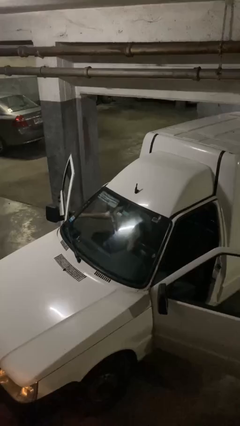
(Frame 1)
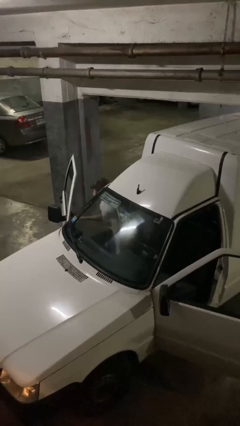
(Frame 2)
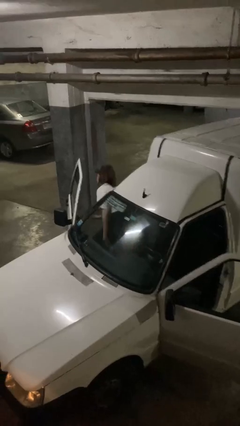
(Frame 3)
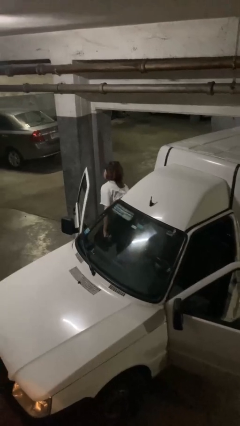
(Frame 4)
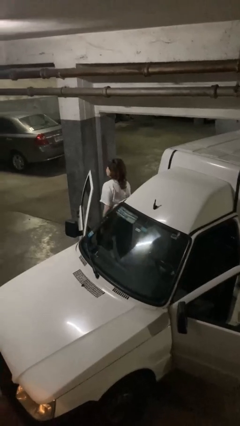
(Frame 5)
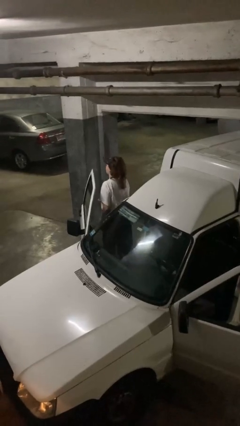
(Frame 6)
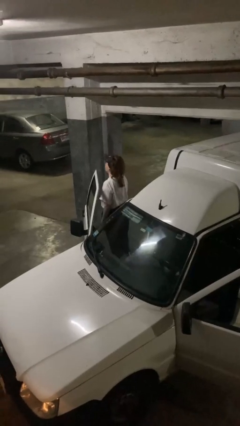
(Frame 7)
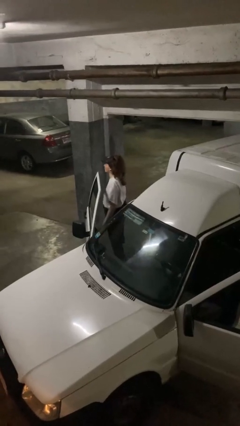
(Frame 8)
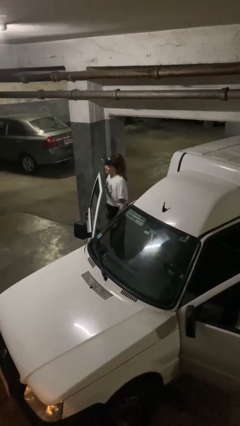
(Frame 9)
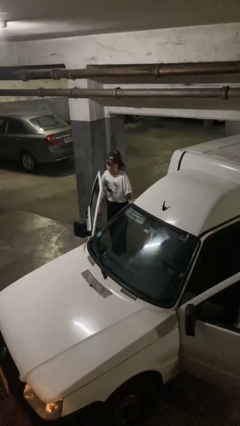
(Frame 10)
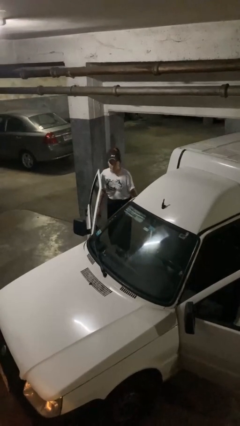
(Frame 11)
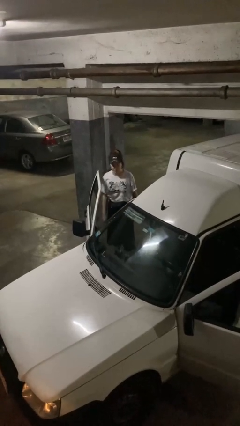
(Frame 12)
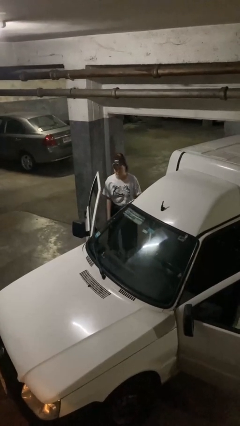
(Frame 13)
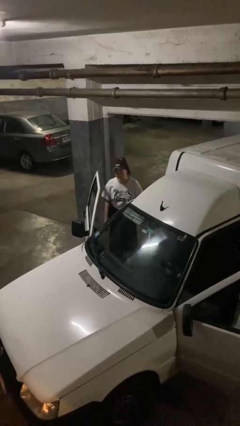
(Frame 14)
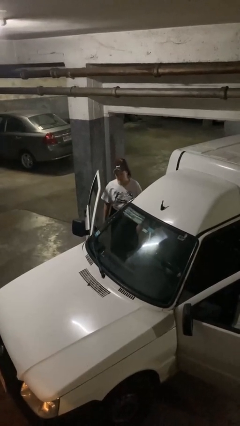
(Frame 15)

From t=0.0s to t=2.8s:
person exits car

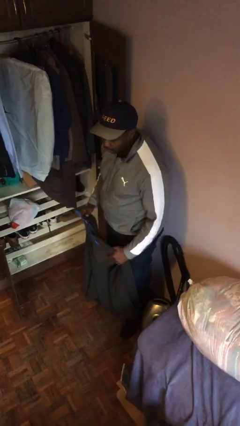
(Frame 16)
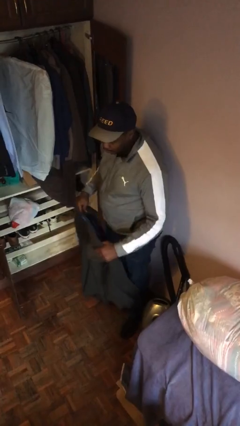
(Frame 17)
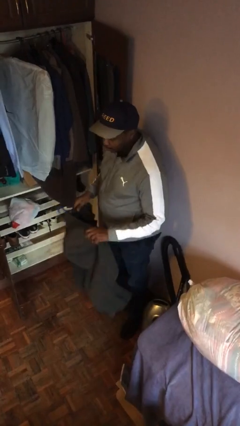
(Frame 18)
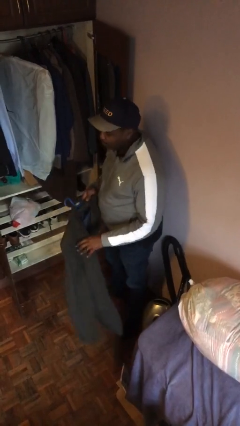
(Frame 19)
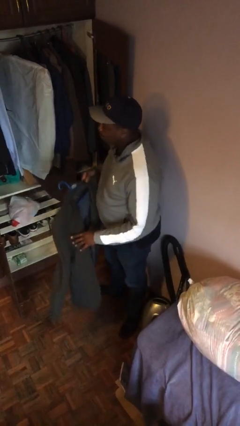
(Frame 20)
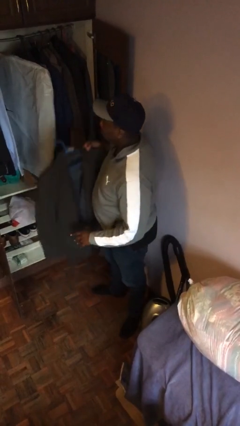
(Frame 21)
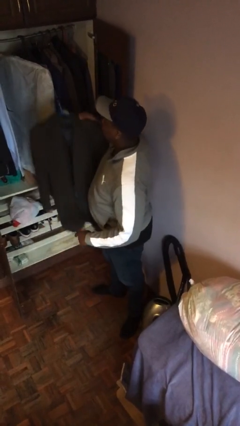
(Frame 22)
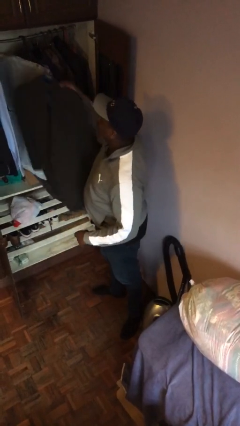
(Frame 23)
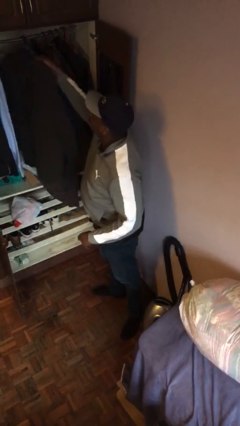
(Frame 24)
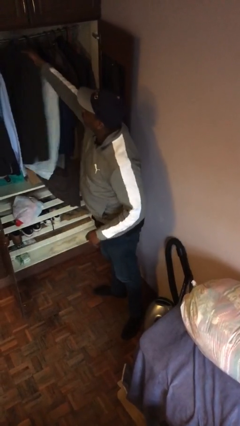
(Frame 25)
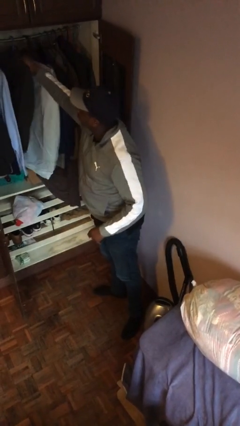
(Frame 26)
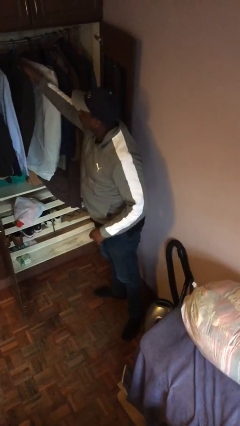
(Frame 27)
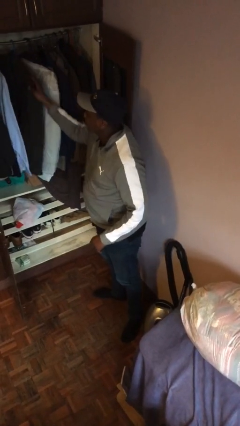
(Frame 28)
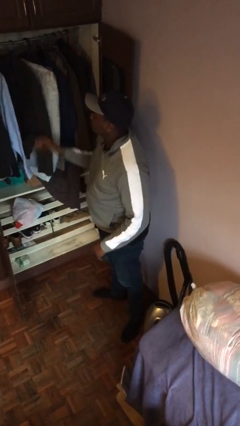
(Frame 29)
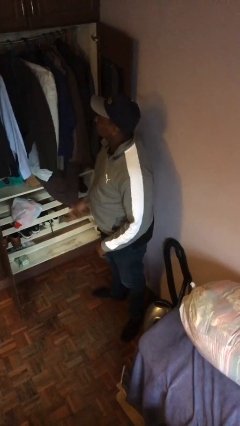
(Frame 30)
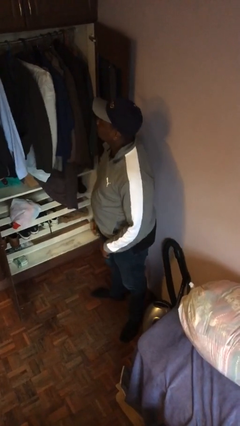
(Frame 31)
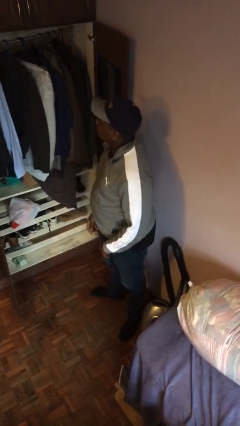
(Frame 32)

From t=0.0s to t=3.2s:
person puts clothes into closet

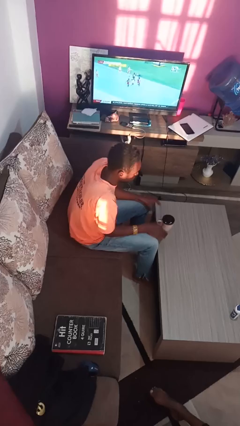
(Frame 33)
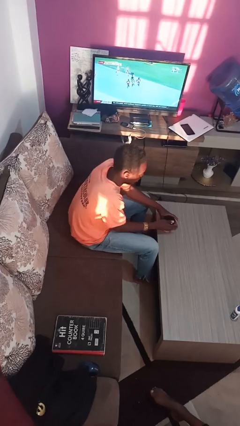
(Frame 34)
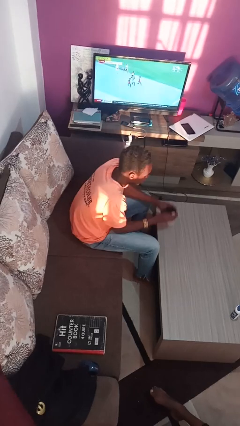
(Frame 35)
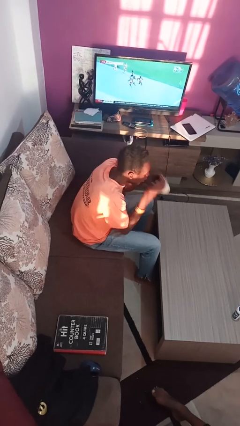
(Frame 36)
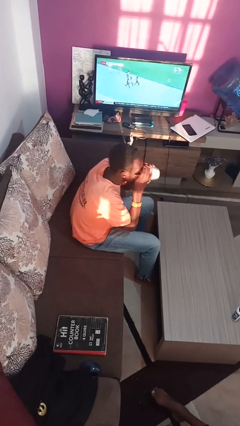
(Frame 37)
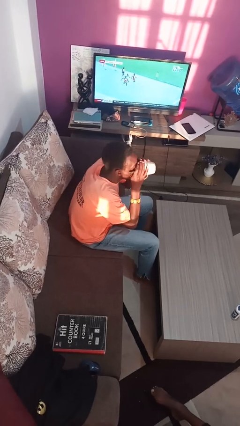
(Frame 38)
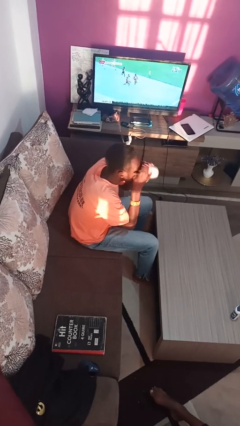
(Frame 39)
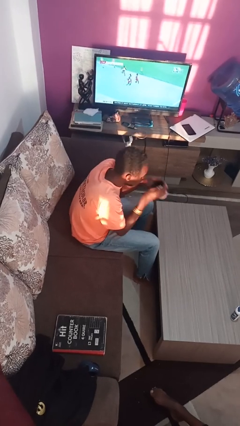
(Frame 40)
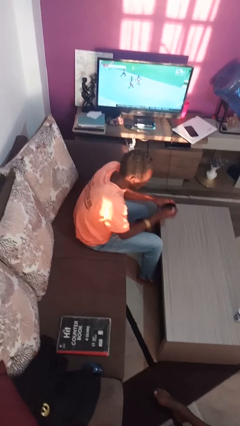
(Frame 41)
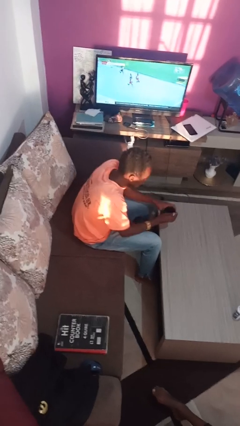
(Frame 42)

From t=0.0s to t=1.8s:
person drinks from mug

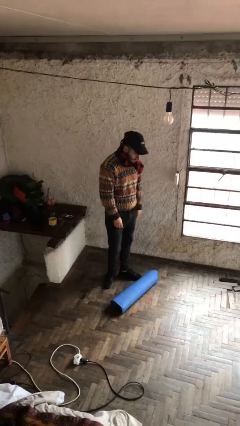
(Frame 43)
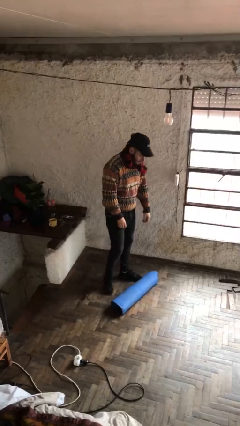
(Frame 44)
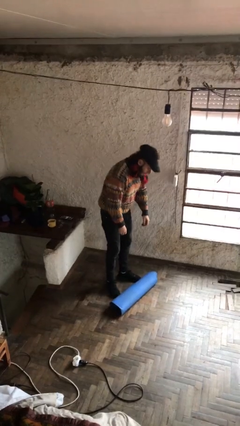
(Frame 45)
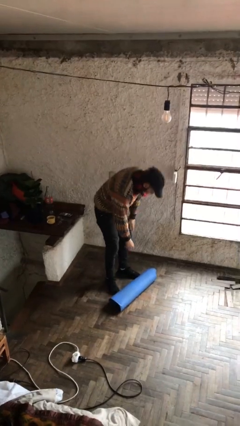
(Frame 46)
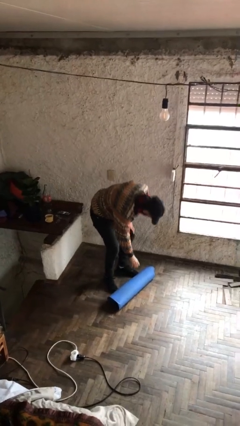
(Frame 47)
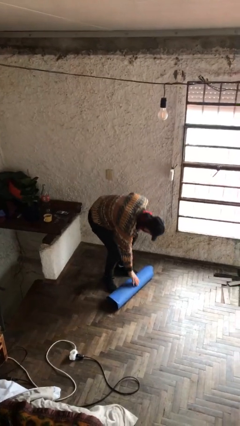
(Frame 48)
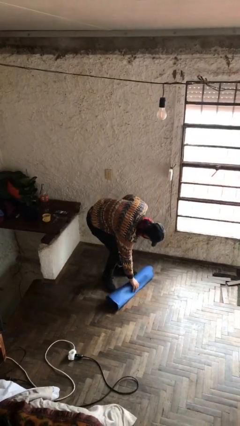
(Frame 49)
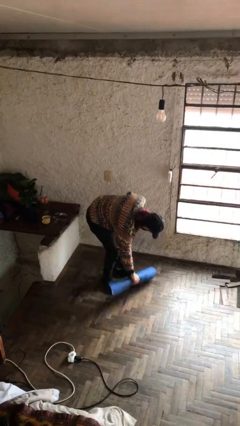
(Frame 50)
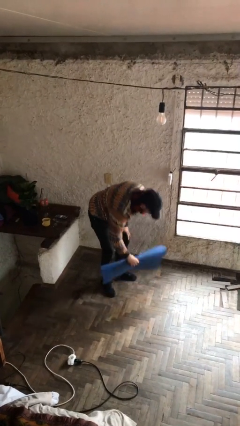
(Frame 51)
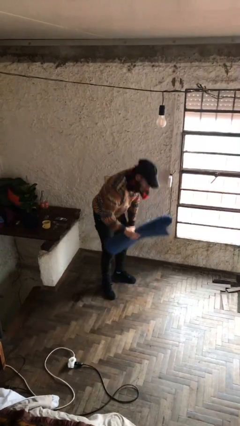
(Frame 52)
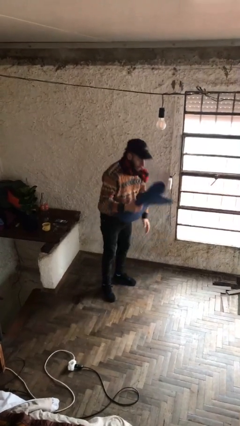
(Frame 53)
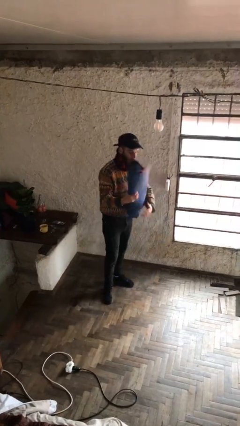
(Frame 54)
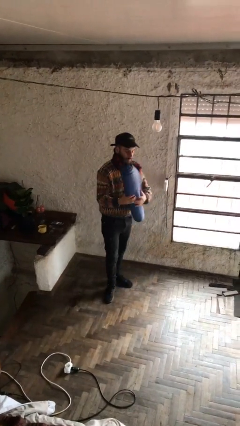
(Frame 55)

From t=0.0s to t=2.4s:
person picks up object from floor

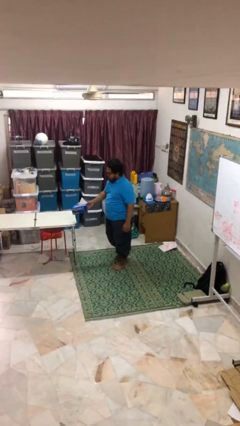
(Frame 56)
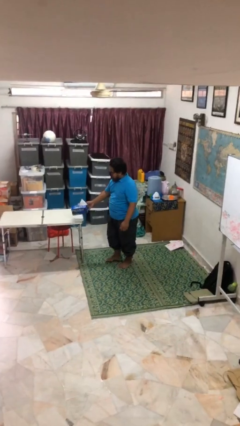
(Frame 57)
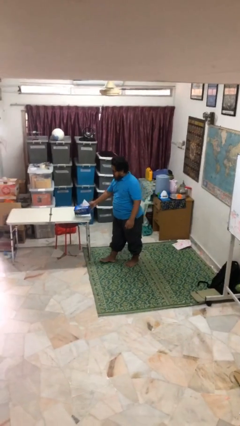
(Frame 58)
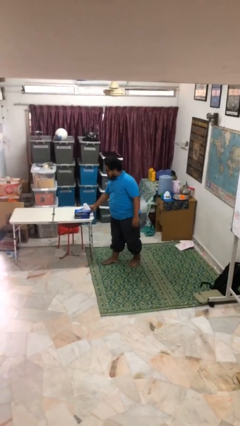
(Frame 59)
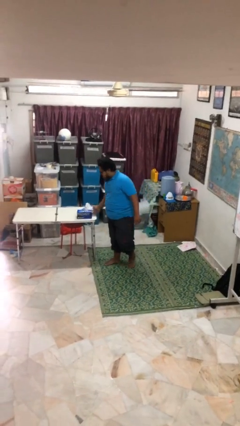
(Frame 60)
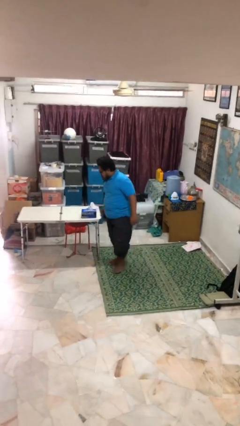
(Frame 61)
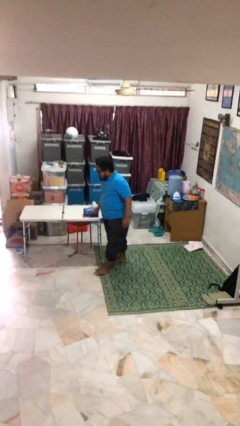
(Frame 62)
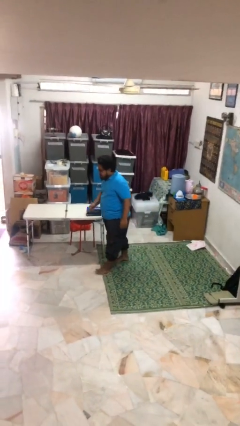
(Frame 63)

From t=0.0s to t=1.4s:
person puts down object on table

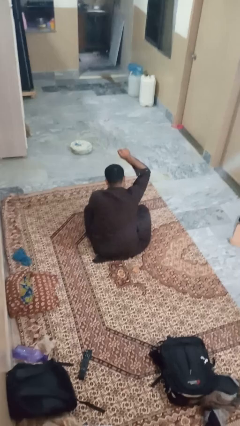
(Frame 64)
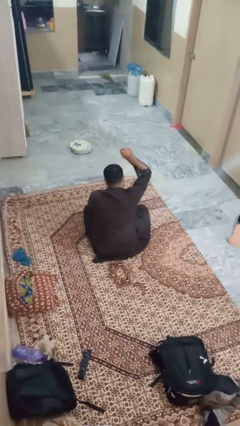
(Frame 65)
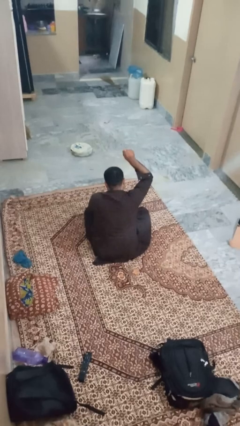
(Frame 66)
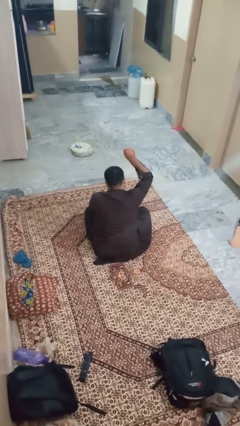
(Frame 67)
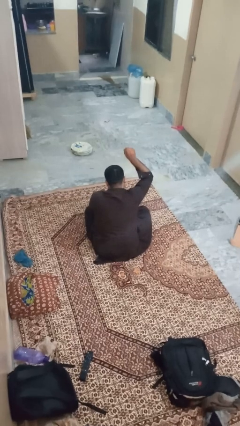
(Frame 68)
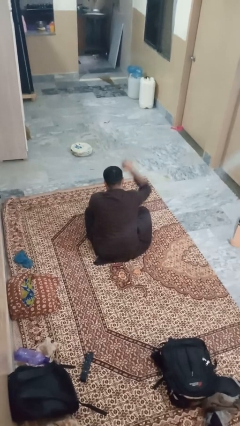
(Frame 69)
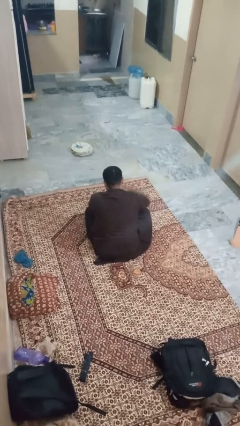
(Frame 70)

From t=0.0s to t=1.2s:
person gestures number one

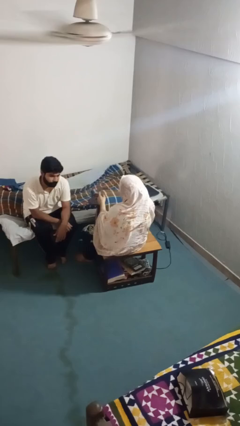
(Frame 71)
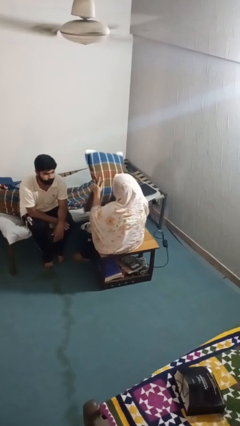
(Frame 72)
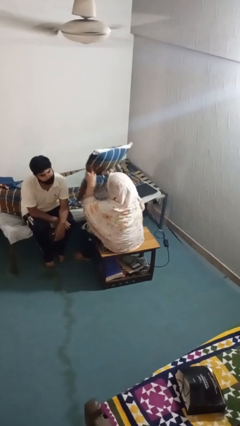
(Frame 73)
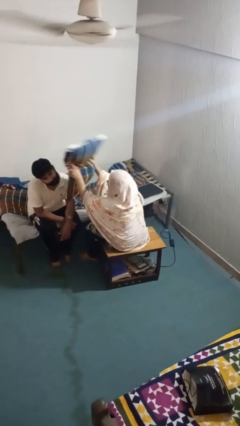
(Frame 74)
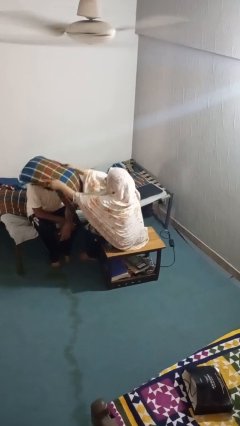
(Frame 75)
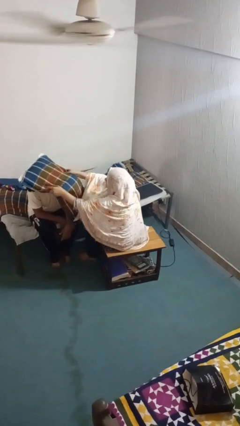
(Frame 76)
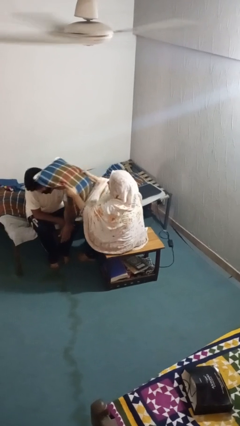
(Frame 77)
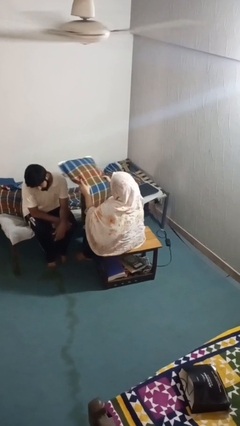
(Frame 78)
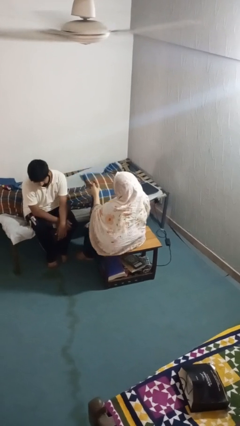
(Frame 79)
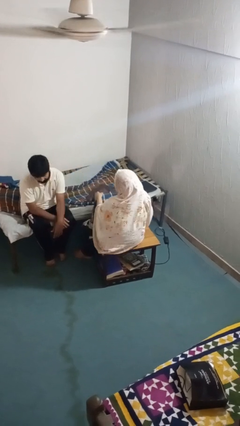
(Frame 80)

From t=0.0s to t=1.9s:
person hits person with pillow

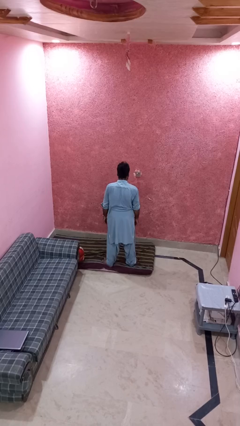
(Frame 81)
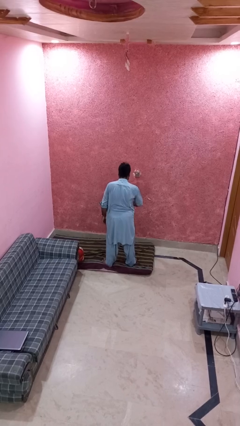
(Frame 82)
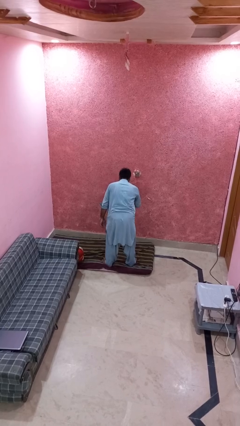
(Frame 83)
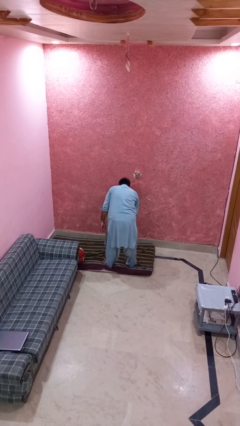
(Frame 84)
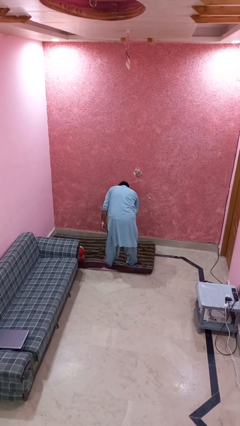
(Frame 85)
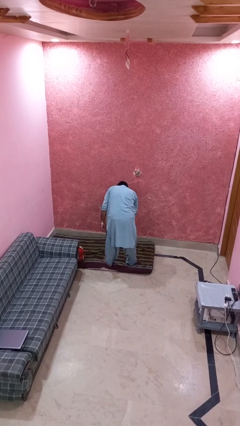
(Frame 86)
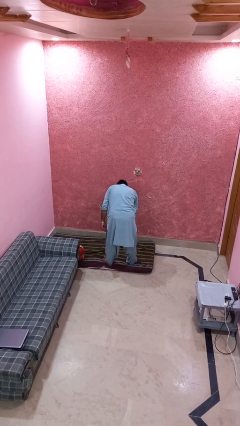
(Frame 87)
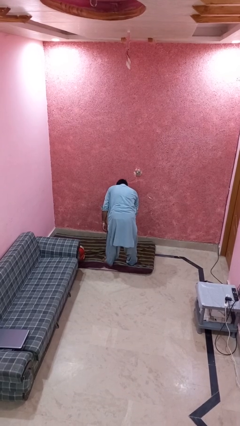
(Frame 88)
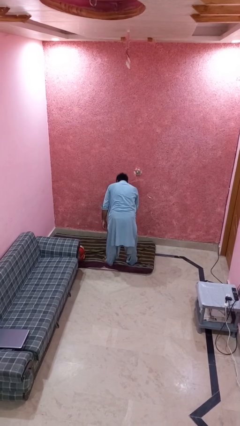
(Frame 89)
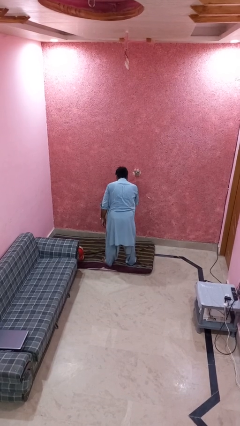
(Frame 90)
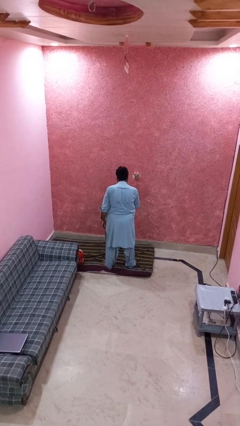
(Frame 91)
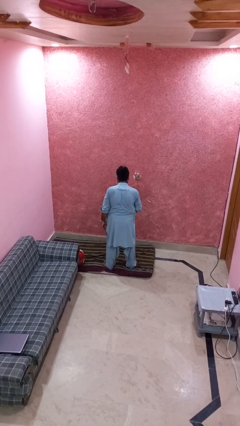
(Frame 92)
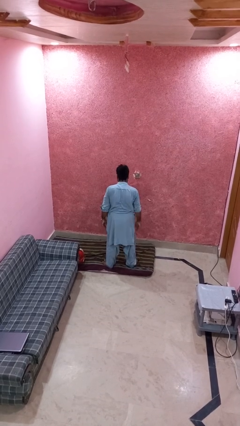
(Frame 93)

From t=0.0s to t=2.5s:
person bows
